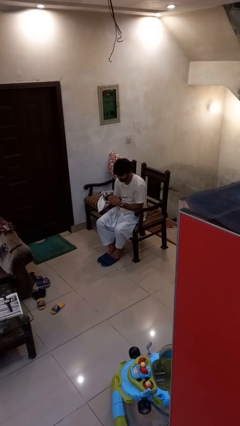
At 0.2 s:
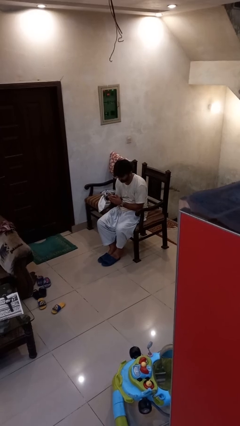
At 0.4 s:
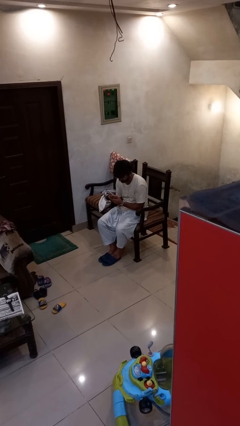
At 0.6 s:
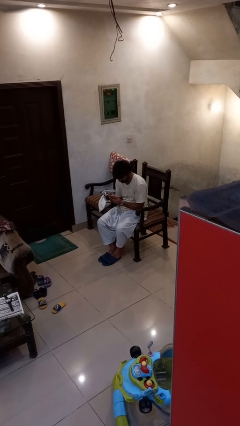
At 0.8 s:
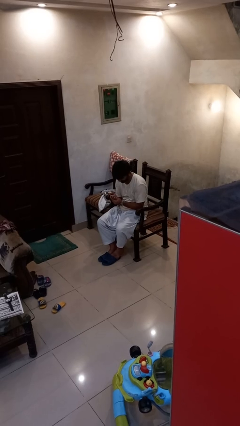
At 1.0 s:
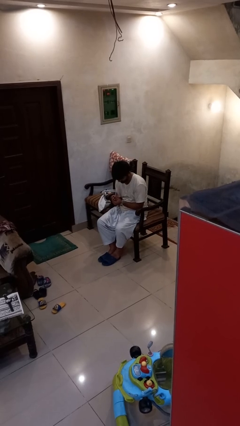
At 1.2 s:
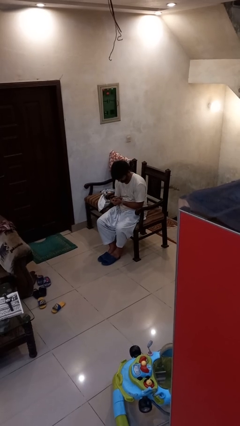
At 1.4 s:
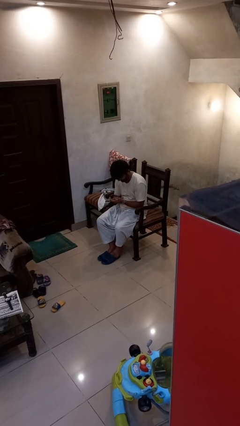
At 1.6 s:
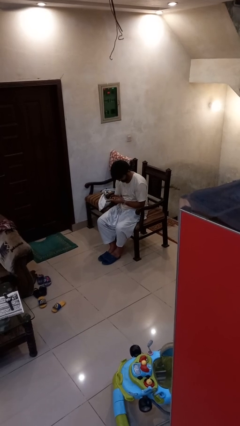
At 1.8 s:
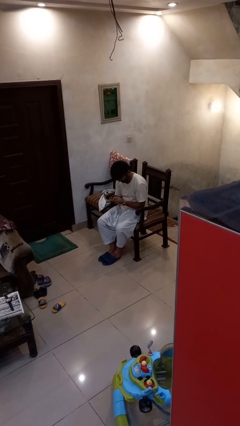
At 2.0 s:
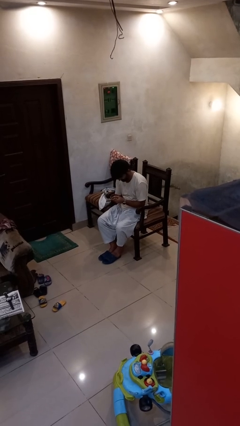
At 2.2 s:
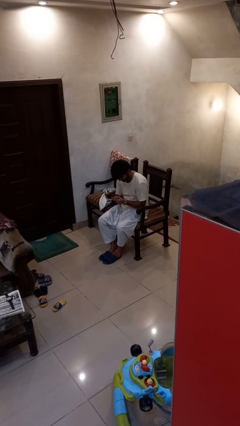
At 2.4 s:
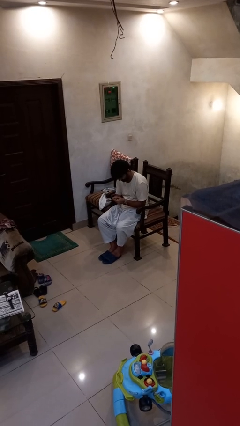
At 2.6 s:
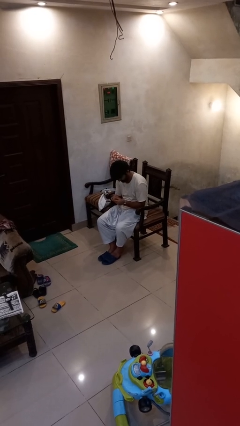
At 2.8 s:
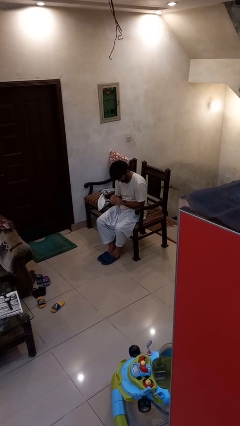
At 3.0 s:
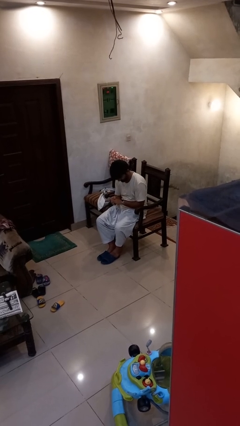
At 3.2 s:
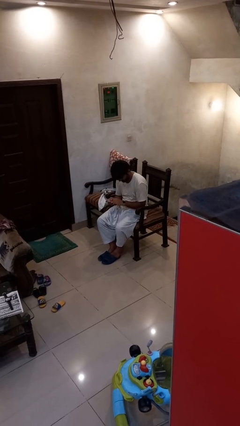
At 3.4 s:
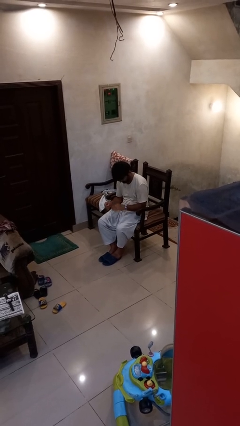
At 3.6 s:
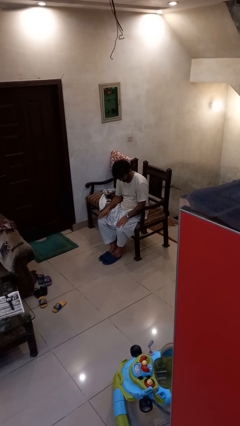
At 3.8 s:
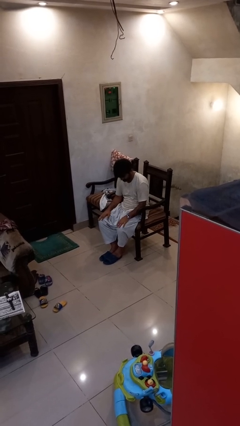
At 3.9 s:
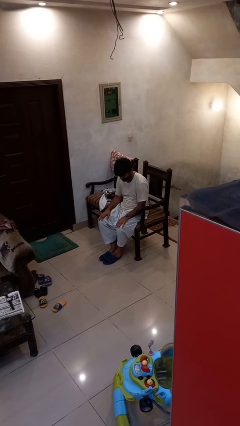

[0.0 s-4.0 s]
person looks at hands in lap

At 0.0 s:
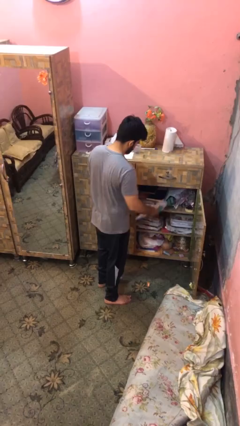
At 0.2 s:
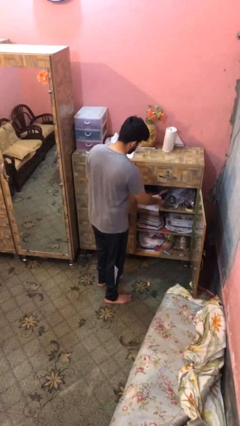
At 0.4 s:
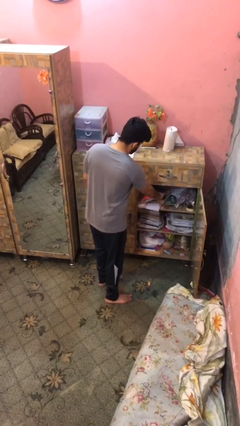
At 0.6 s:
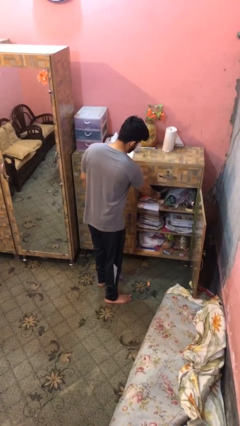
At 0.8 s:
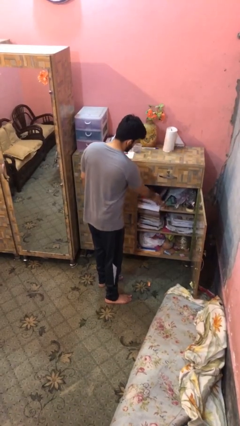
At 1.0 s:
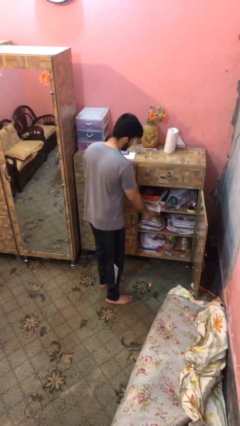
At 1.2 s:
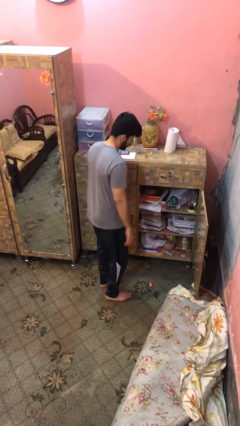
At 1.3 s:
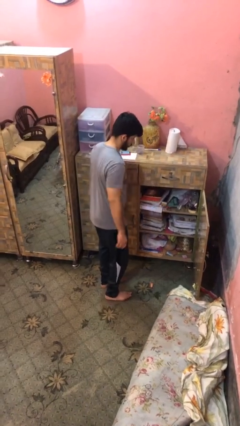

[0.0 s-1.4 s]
person puts down object into cabinet

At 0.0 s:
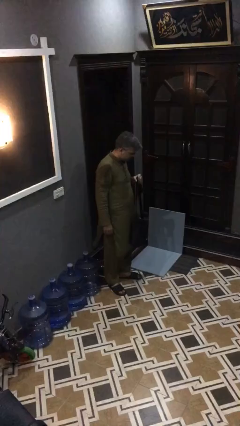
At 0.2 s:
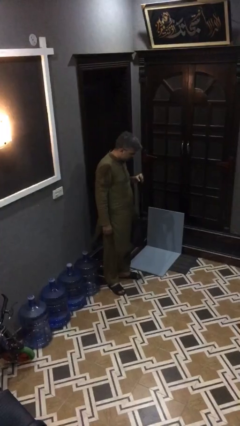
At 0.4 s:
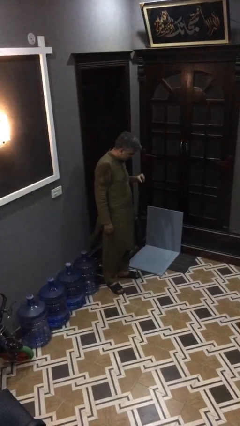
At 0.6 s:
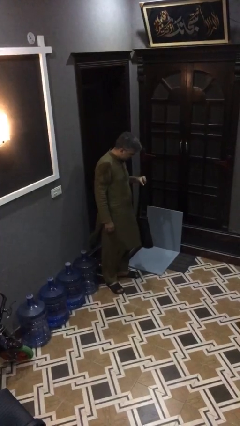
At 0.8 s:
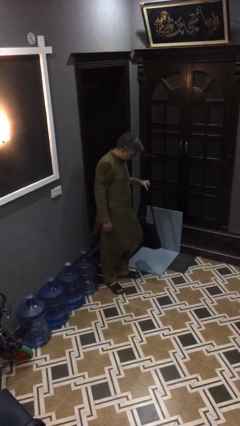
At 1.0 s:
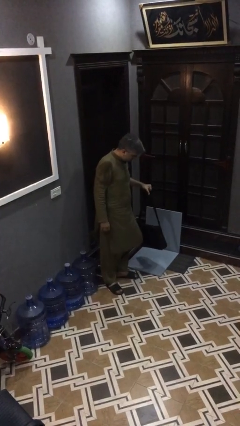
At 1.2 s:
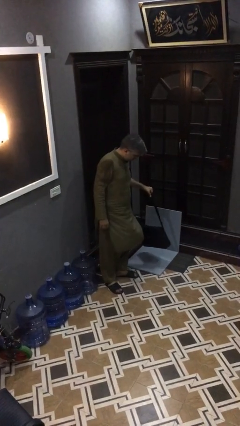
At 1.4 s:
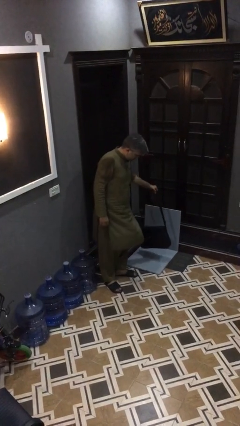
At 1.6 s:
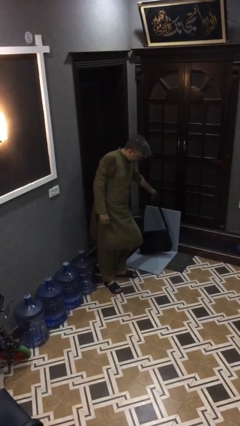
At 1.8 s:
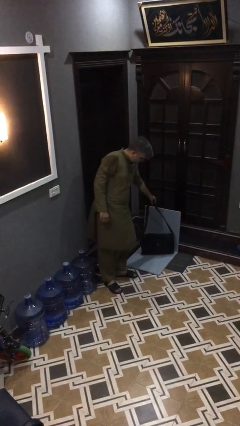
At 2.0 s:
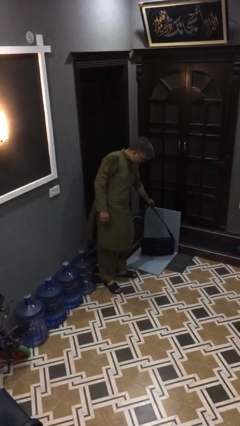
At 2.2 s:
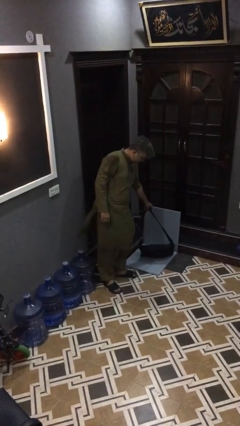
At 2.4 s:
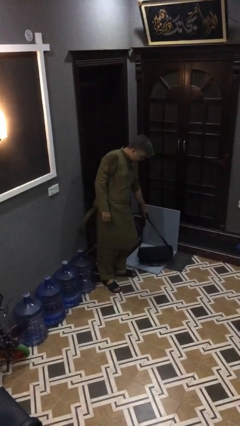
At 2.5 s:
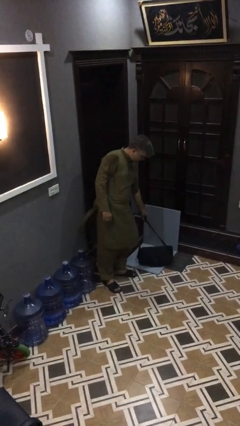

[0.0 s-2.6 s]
person puts down object on floor

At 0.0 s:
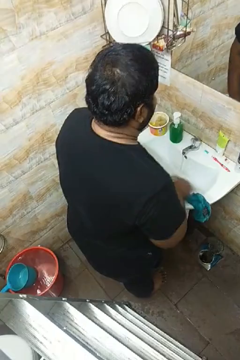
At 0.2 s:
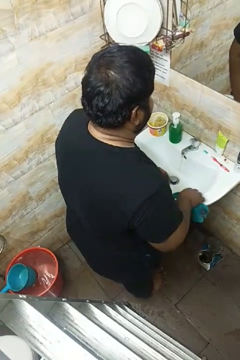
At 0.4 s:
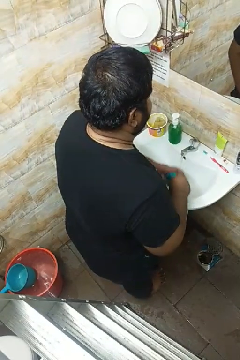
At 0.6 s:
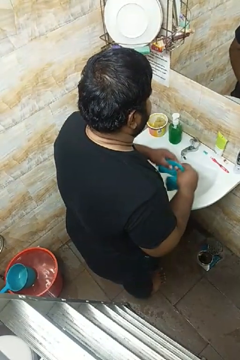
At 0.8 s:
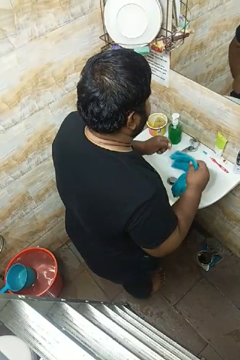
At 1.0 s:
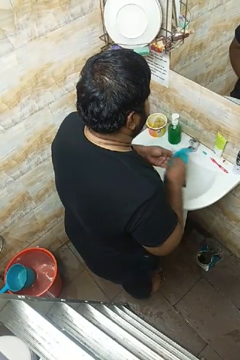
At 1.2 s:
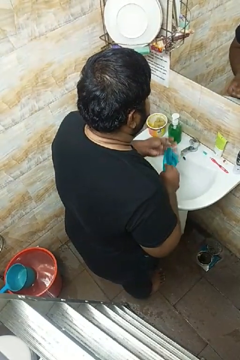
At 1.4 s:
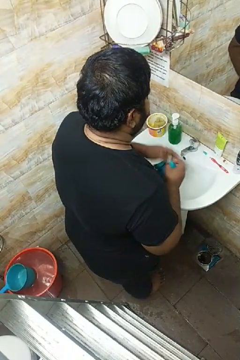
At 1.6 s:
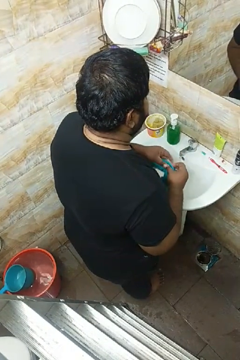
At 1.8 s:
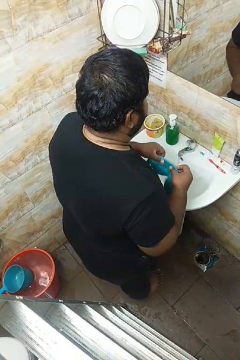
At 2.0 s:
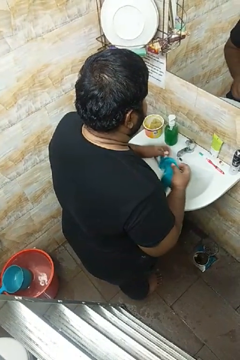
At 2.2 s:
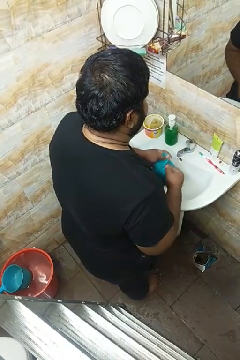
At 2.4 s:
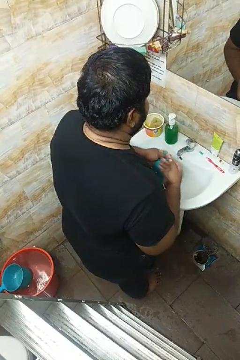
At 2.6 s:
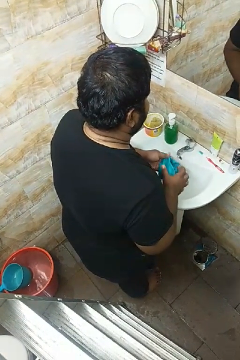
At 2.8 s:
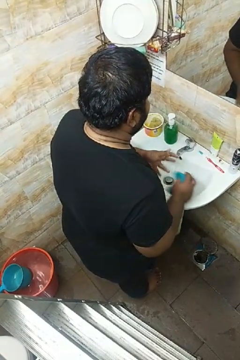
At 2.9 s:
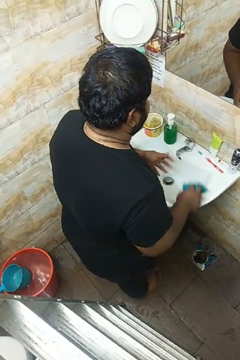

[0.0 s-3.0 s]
person dries hands with towel

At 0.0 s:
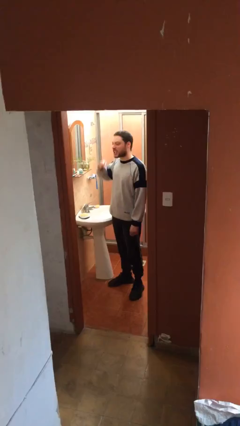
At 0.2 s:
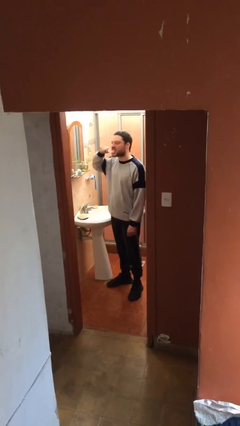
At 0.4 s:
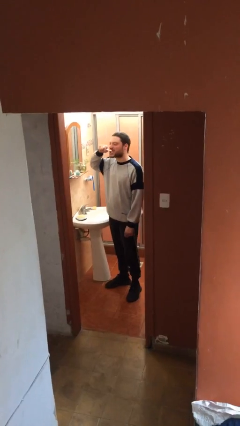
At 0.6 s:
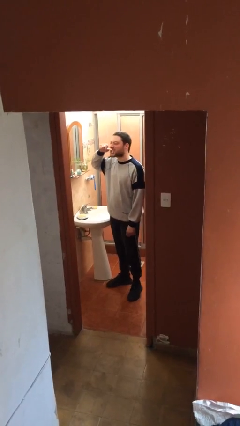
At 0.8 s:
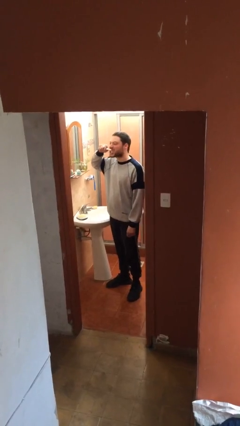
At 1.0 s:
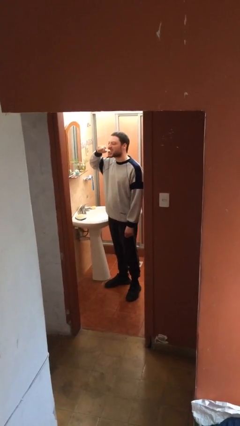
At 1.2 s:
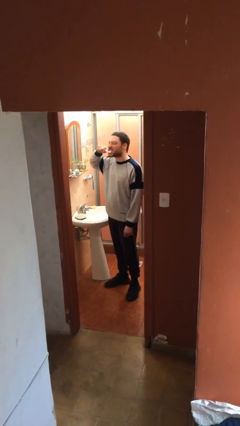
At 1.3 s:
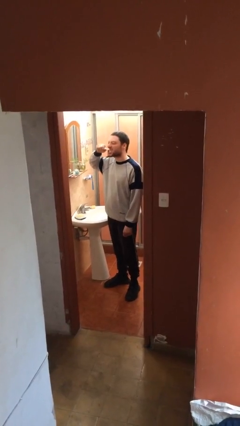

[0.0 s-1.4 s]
person brushes teeth

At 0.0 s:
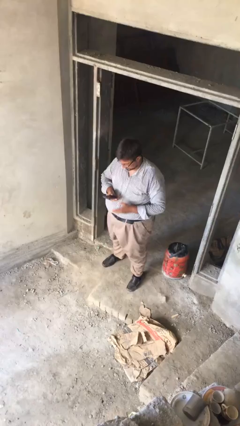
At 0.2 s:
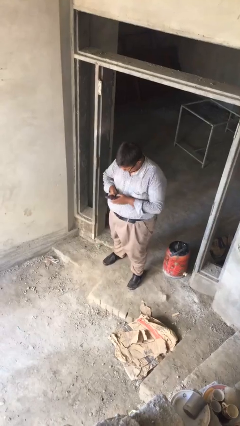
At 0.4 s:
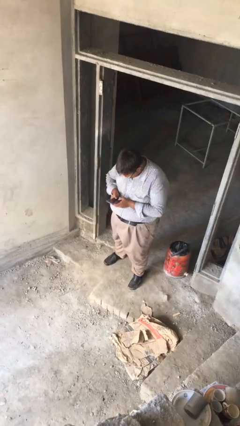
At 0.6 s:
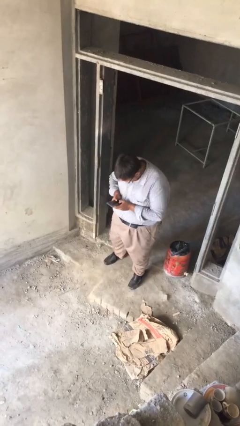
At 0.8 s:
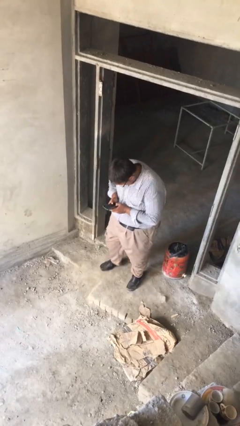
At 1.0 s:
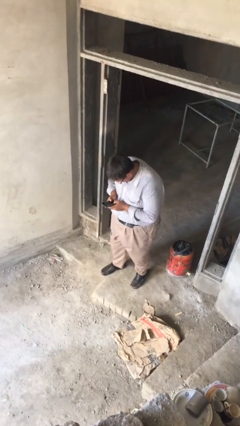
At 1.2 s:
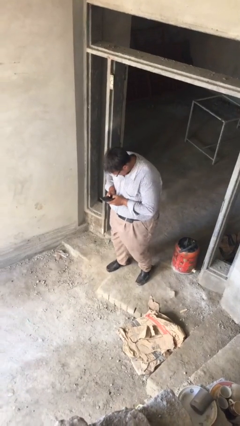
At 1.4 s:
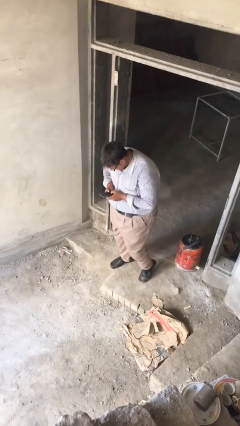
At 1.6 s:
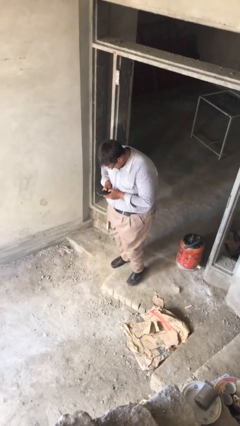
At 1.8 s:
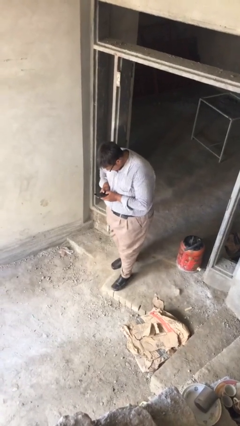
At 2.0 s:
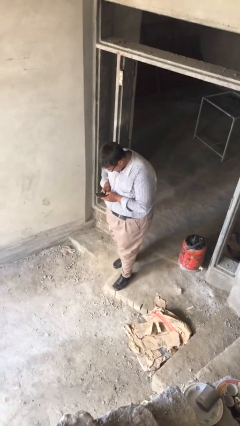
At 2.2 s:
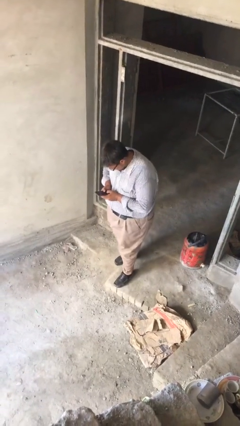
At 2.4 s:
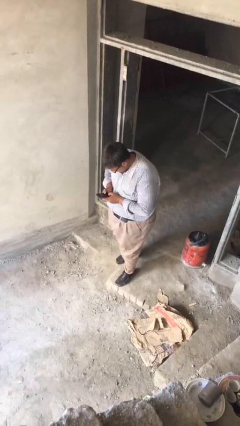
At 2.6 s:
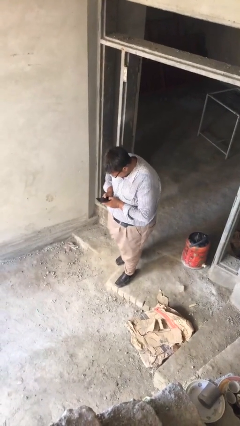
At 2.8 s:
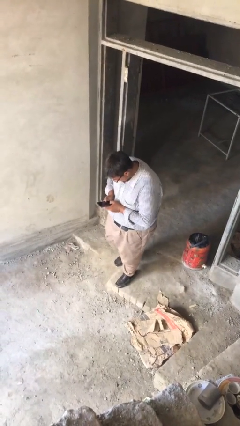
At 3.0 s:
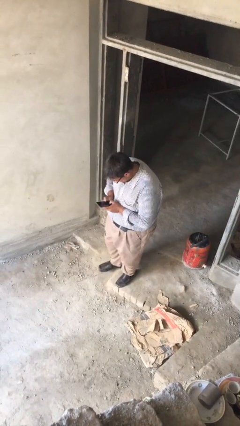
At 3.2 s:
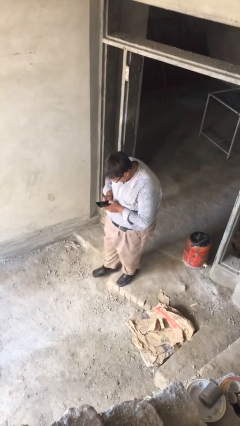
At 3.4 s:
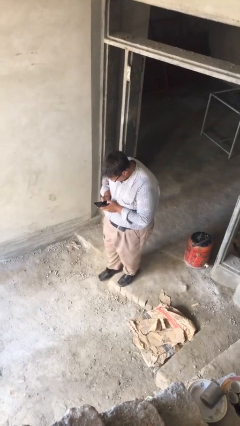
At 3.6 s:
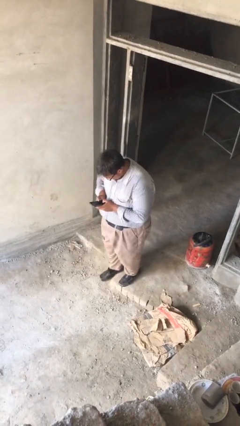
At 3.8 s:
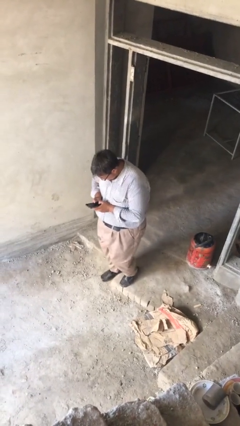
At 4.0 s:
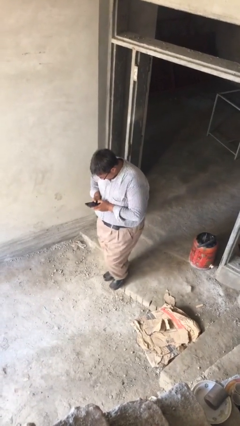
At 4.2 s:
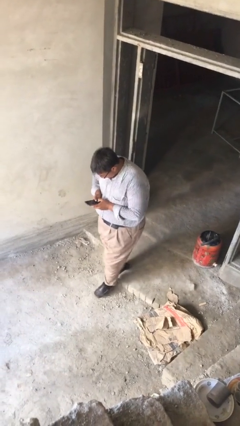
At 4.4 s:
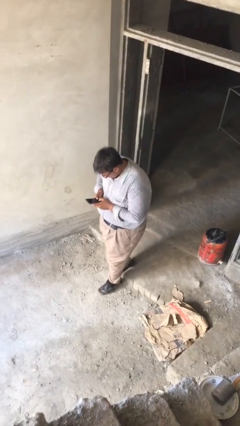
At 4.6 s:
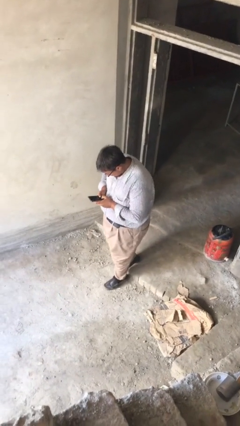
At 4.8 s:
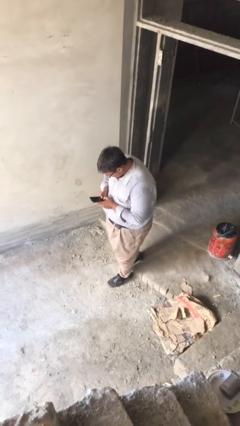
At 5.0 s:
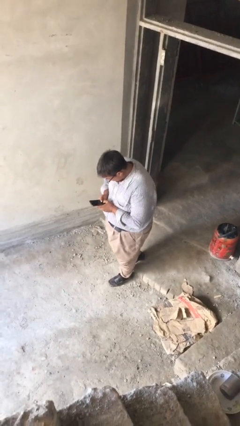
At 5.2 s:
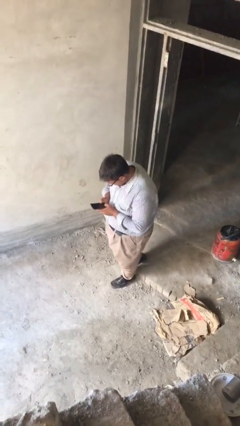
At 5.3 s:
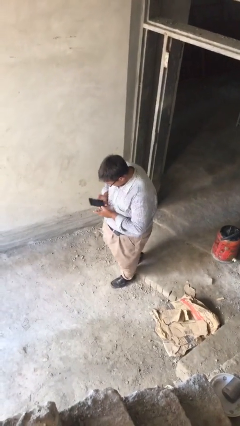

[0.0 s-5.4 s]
person texts on phone
